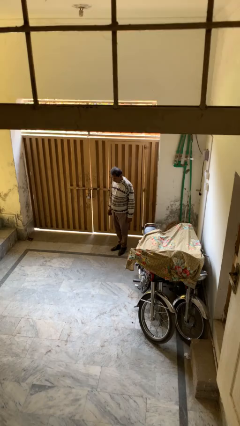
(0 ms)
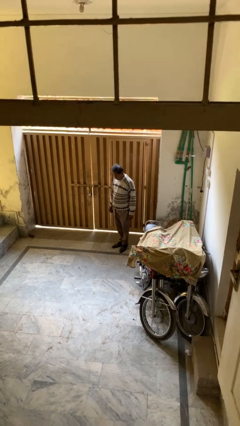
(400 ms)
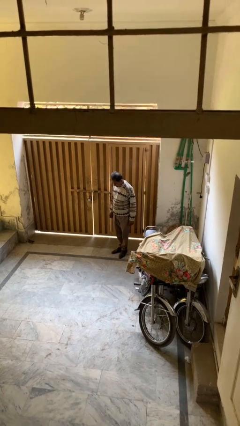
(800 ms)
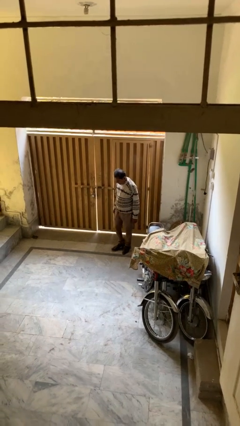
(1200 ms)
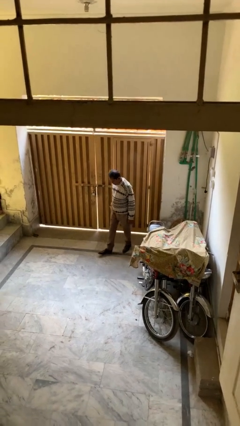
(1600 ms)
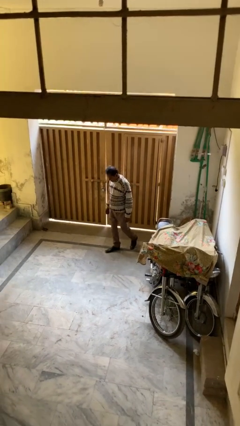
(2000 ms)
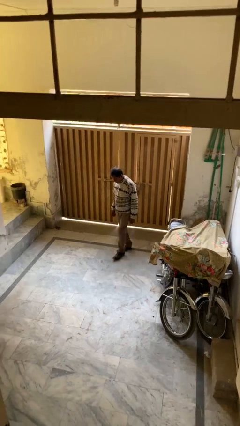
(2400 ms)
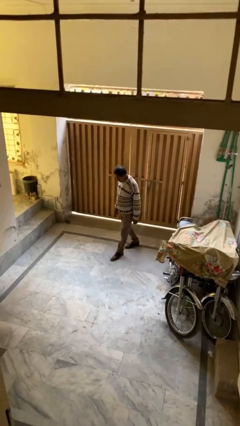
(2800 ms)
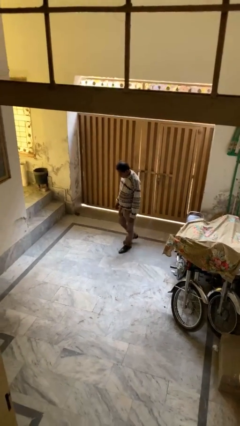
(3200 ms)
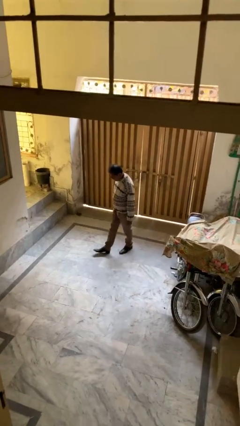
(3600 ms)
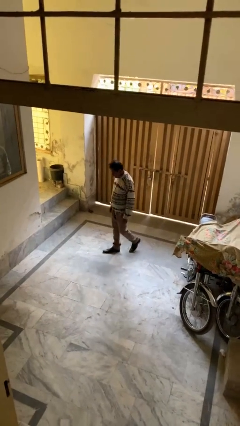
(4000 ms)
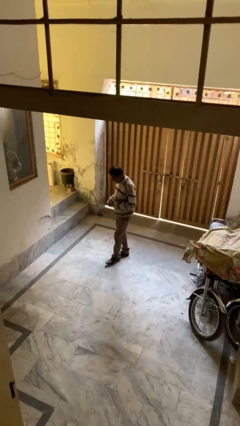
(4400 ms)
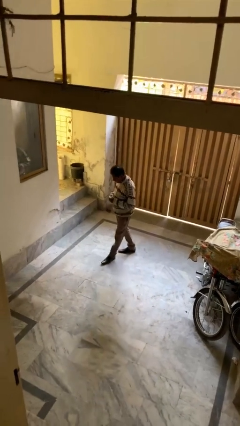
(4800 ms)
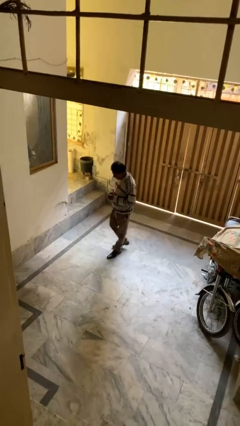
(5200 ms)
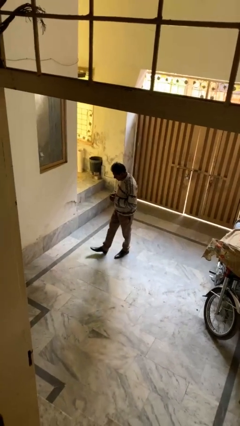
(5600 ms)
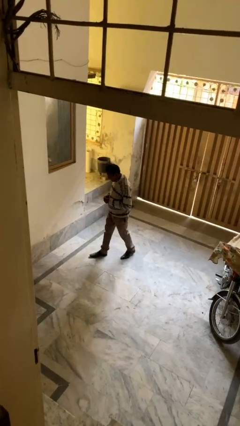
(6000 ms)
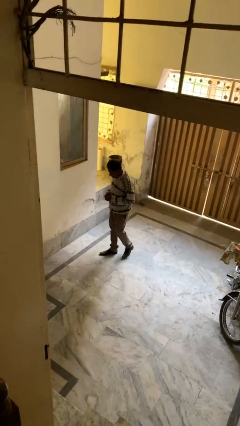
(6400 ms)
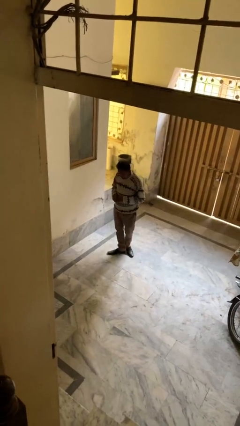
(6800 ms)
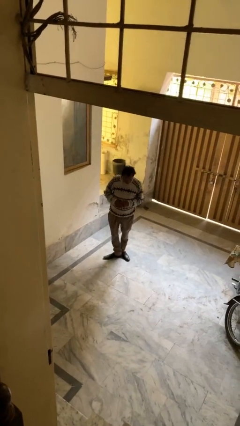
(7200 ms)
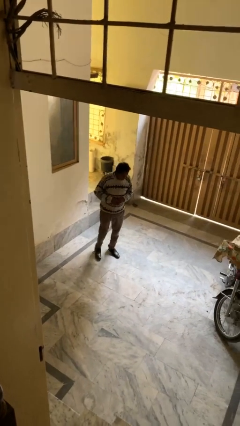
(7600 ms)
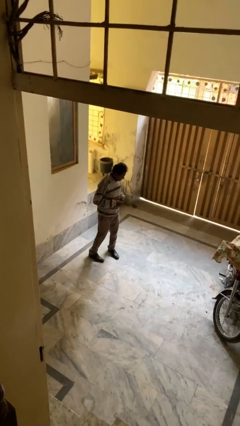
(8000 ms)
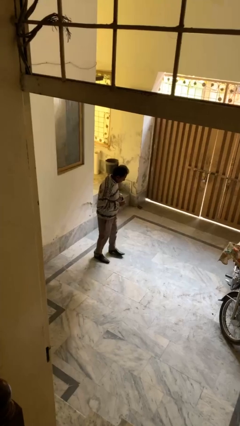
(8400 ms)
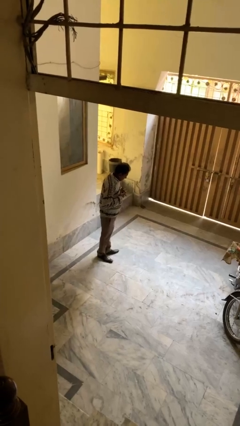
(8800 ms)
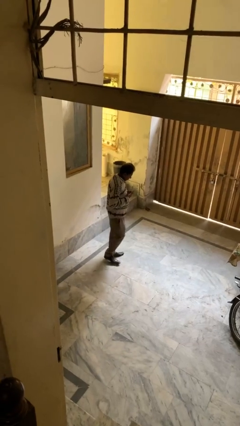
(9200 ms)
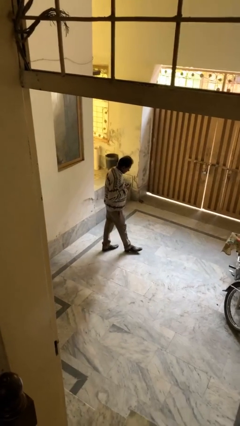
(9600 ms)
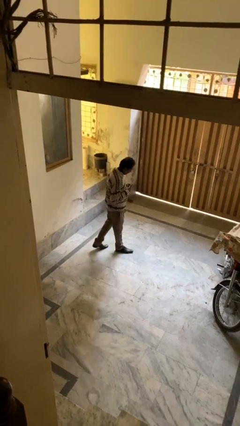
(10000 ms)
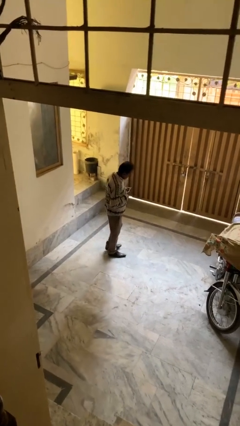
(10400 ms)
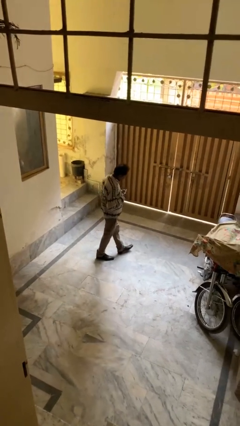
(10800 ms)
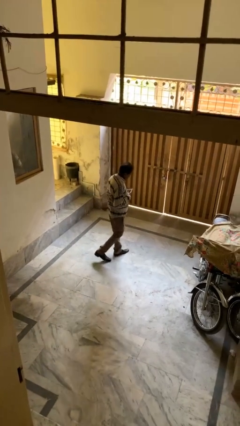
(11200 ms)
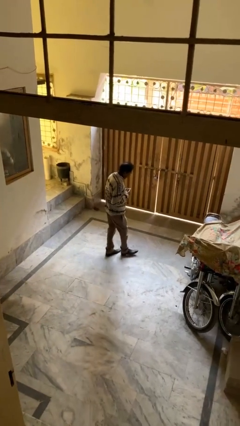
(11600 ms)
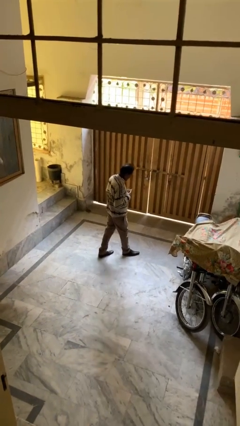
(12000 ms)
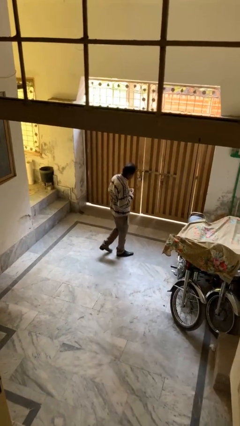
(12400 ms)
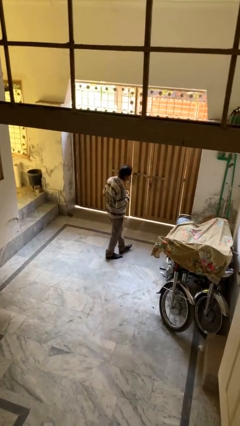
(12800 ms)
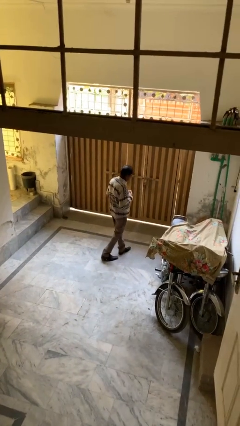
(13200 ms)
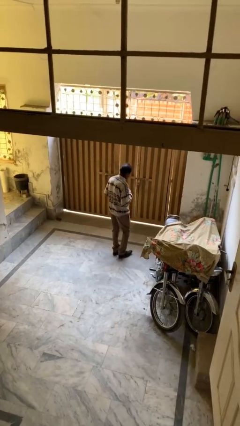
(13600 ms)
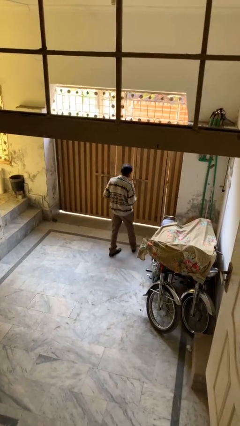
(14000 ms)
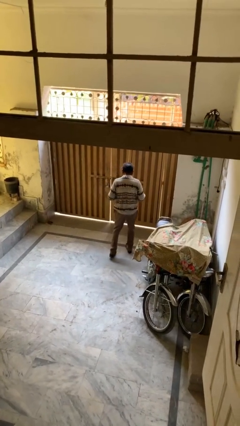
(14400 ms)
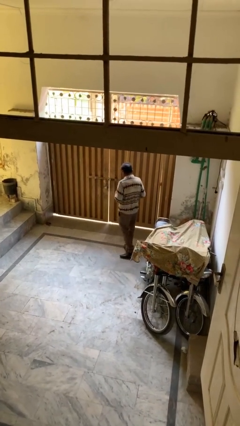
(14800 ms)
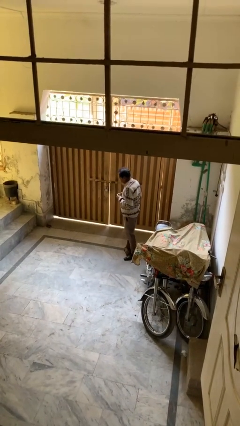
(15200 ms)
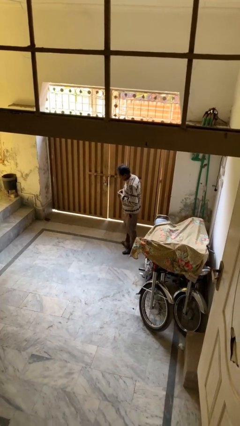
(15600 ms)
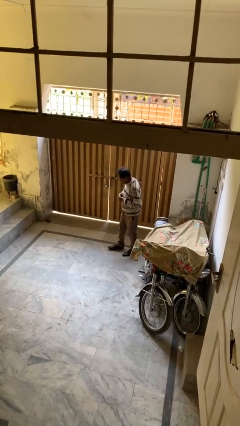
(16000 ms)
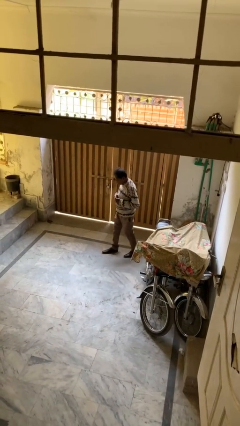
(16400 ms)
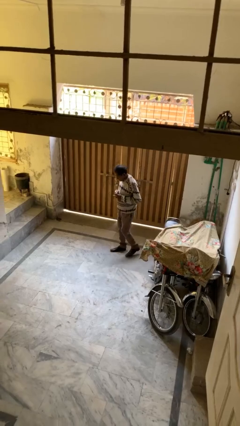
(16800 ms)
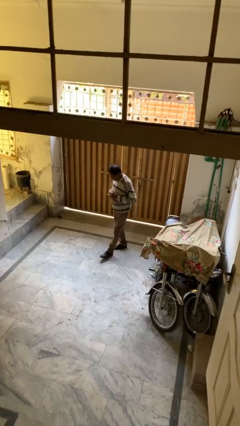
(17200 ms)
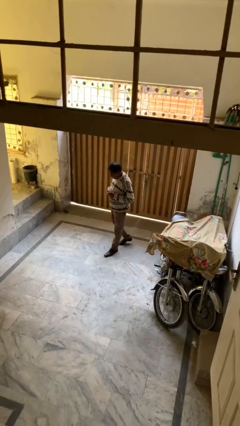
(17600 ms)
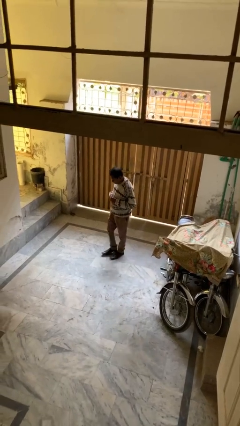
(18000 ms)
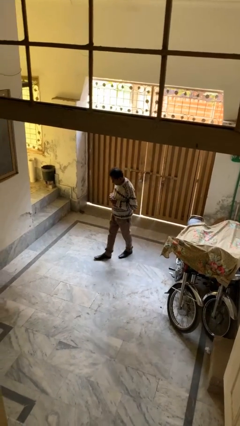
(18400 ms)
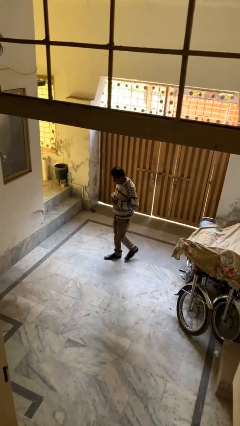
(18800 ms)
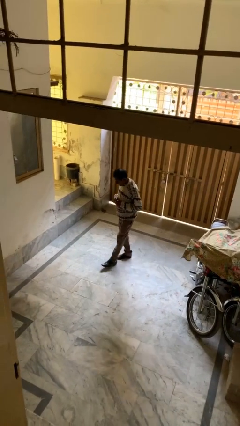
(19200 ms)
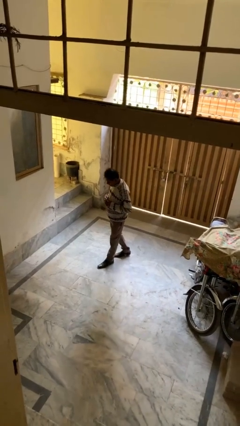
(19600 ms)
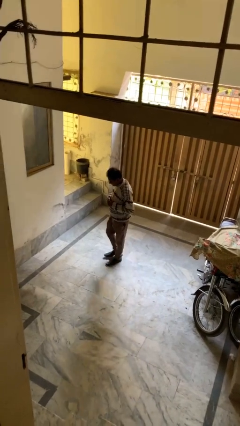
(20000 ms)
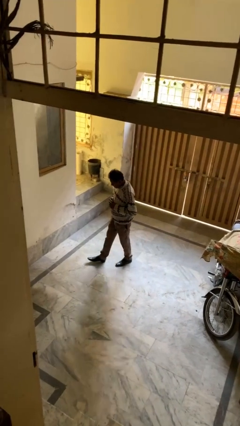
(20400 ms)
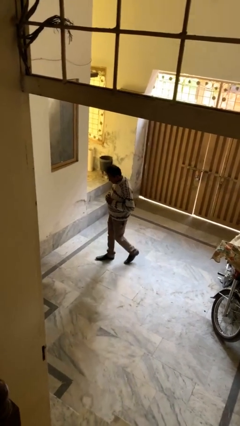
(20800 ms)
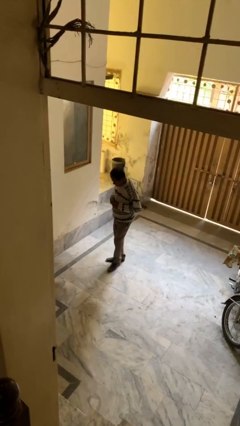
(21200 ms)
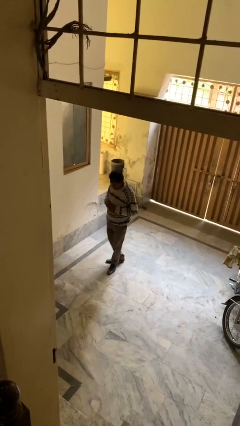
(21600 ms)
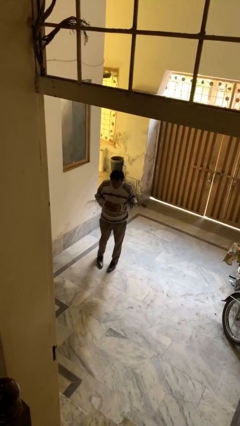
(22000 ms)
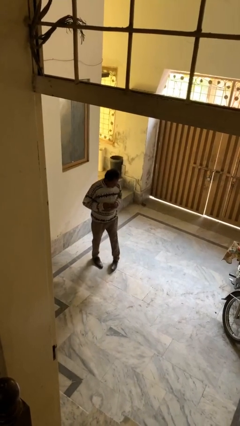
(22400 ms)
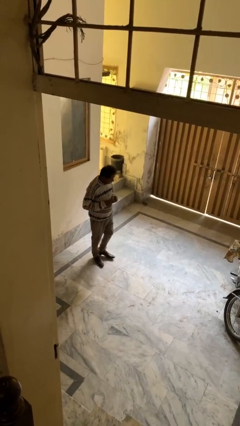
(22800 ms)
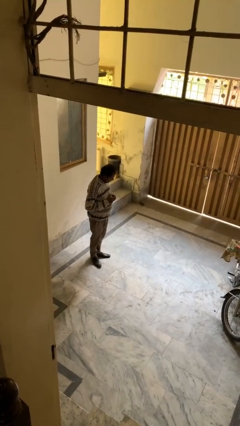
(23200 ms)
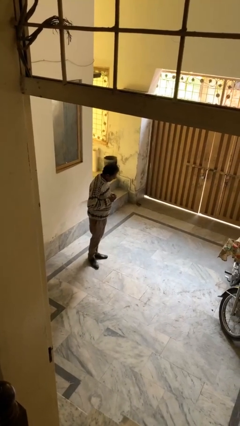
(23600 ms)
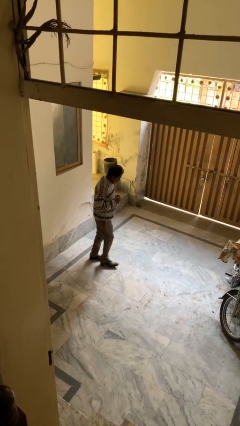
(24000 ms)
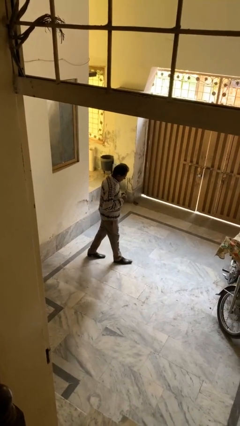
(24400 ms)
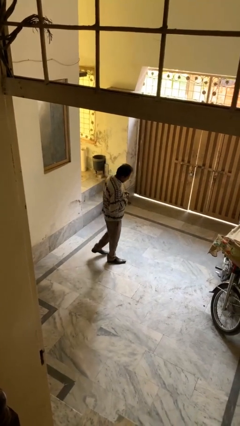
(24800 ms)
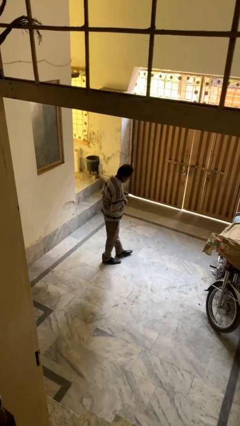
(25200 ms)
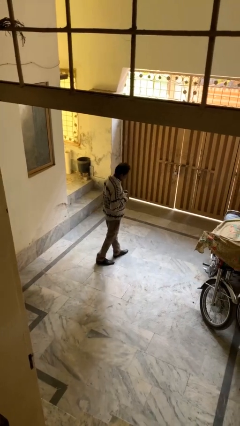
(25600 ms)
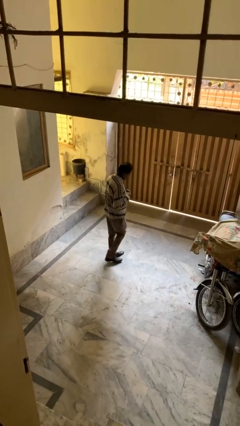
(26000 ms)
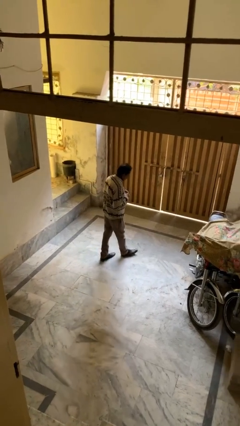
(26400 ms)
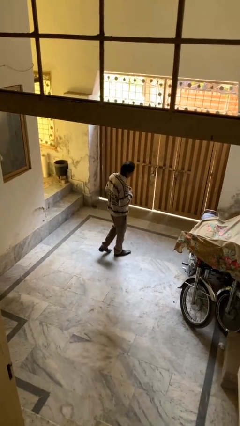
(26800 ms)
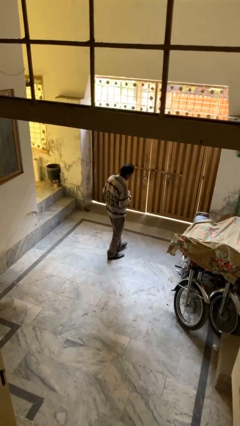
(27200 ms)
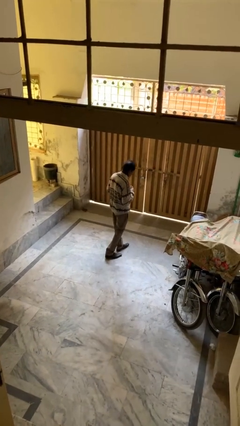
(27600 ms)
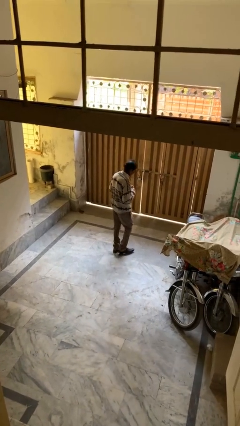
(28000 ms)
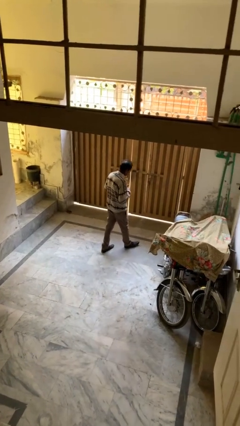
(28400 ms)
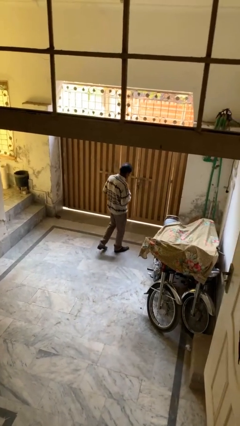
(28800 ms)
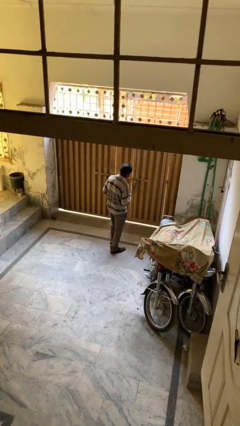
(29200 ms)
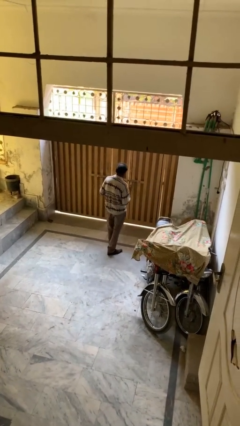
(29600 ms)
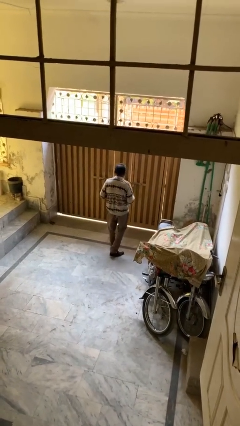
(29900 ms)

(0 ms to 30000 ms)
person walks

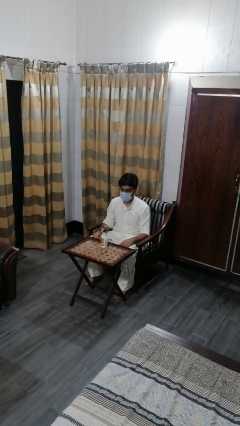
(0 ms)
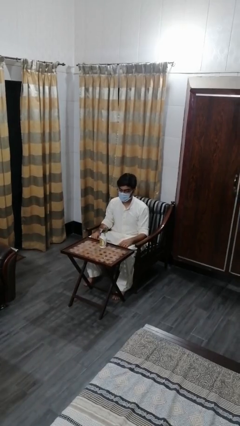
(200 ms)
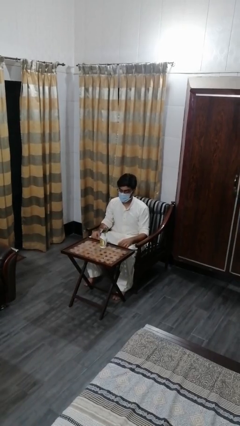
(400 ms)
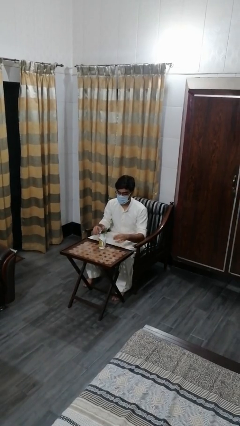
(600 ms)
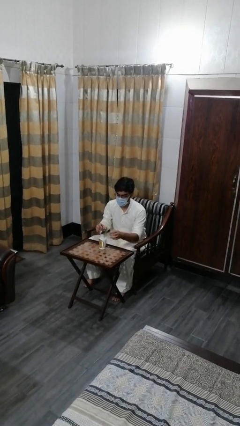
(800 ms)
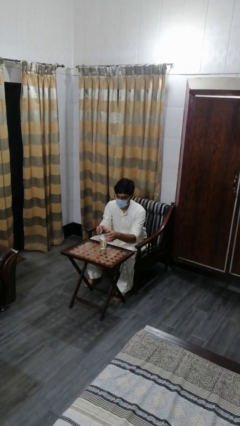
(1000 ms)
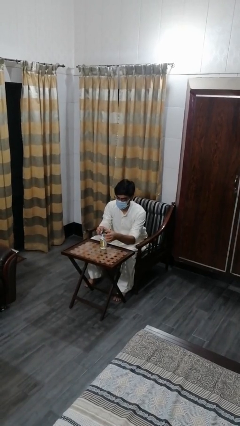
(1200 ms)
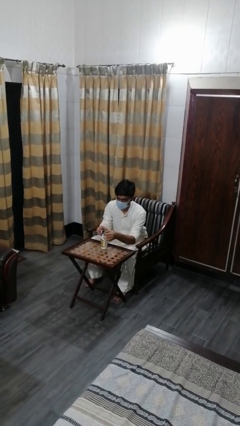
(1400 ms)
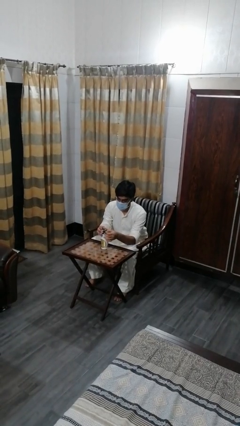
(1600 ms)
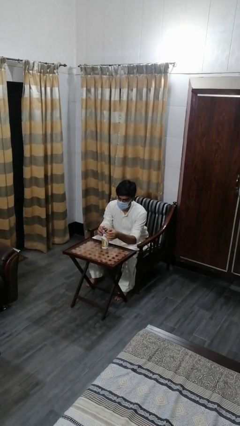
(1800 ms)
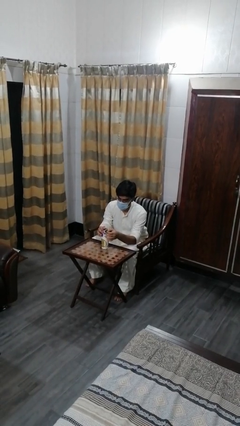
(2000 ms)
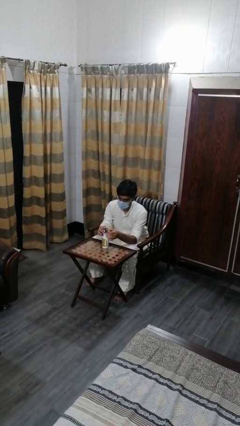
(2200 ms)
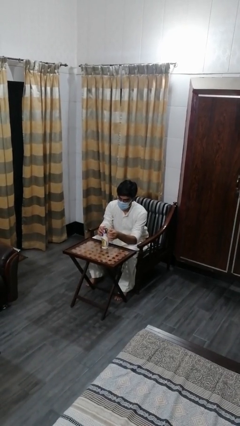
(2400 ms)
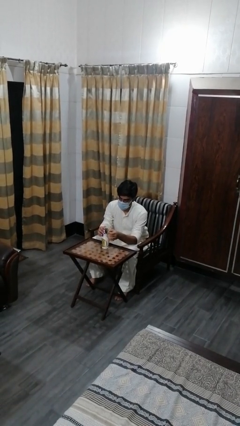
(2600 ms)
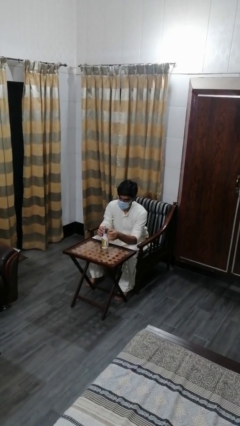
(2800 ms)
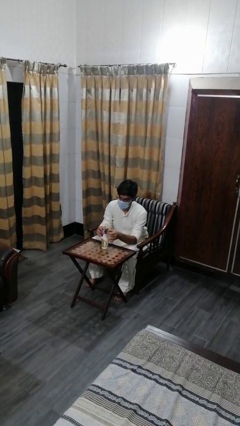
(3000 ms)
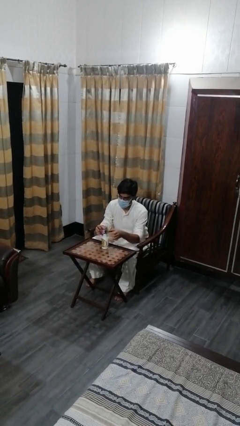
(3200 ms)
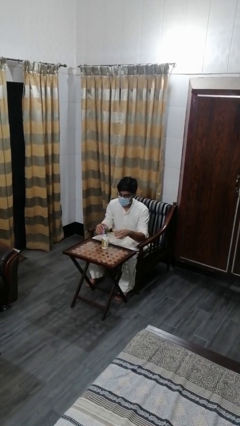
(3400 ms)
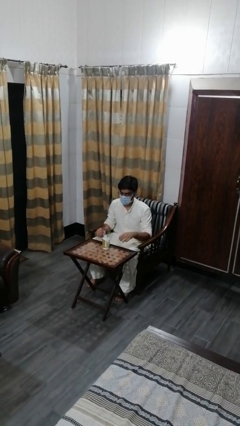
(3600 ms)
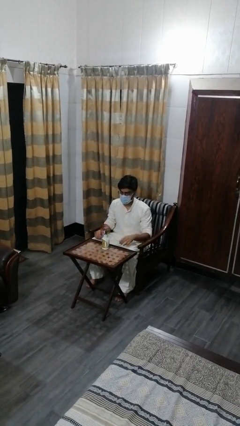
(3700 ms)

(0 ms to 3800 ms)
person arranges flowers in vase
